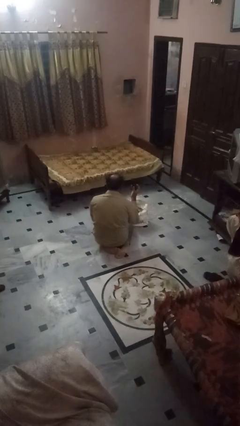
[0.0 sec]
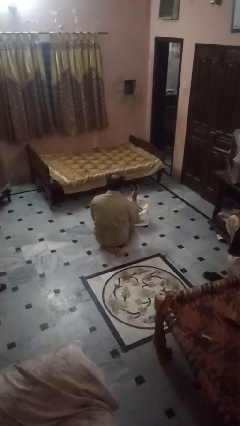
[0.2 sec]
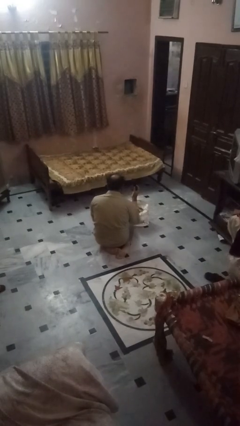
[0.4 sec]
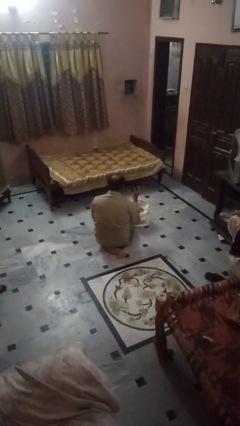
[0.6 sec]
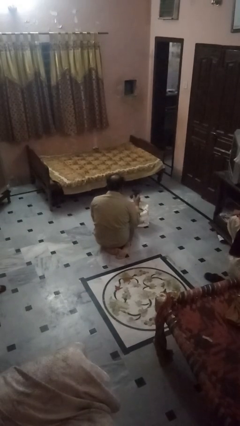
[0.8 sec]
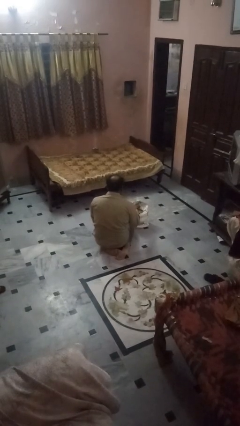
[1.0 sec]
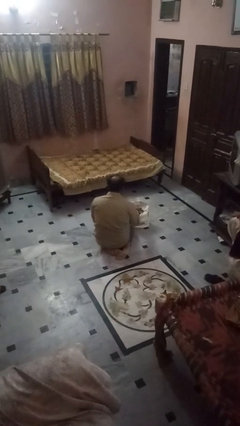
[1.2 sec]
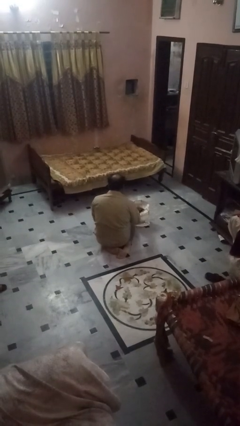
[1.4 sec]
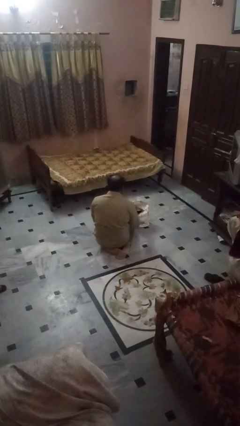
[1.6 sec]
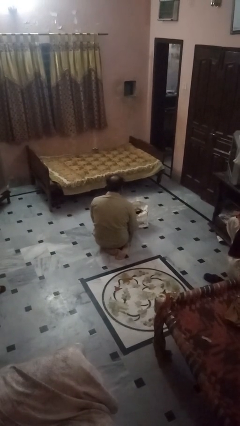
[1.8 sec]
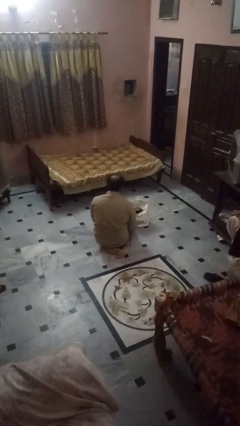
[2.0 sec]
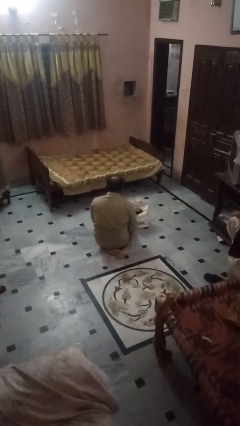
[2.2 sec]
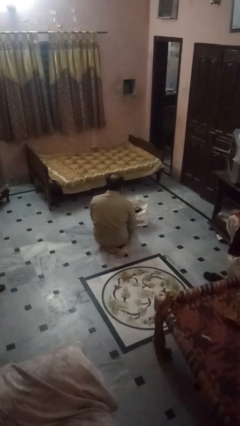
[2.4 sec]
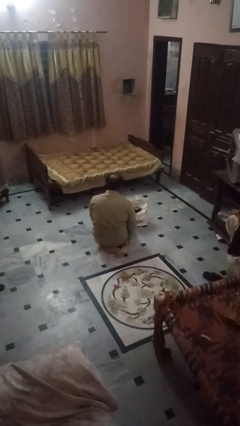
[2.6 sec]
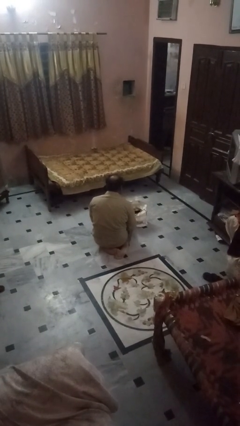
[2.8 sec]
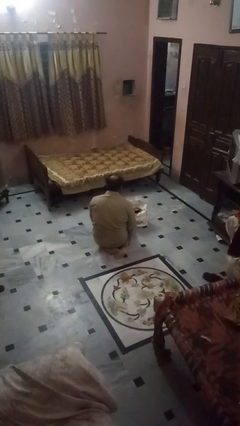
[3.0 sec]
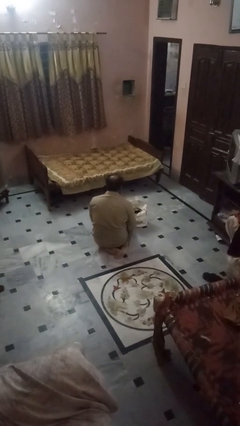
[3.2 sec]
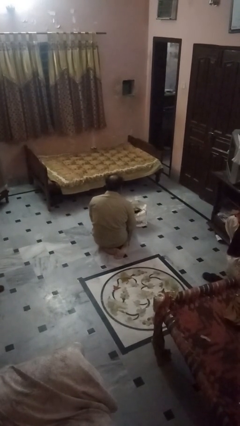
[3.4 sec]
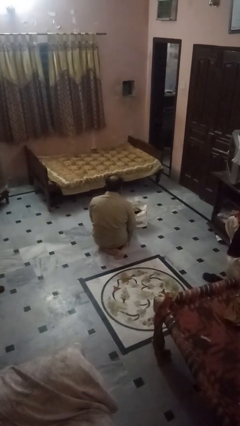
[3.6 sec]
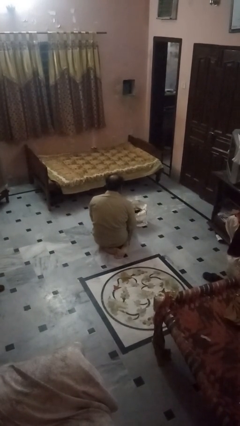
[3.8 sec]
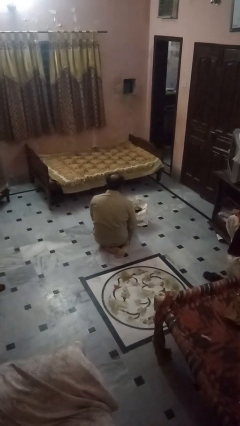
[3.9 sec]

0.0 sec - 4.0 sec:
person puts object into bag

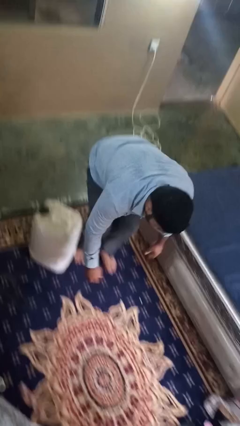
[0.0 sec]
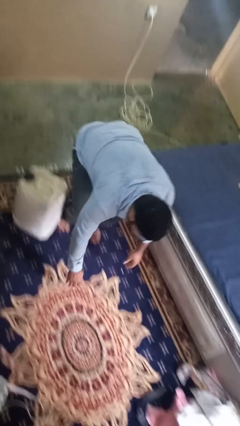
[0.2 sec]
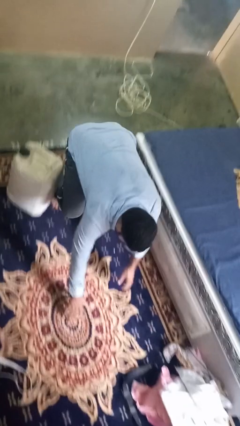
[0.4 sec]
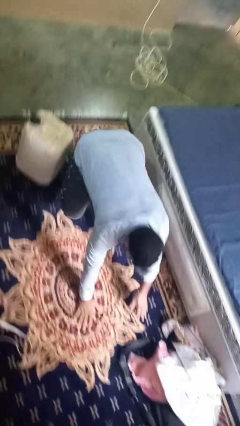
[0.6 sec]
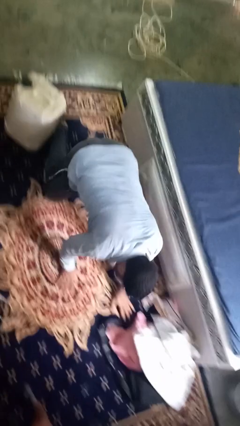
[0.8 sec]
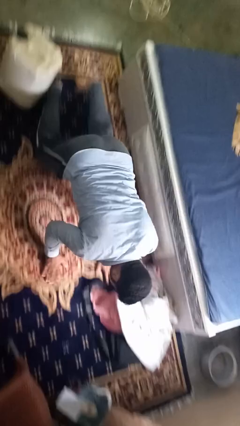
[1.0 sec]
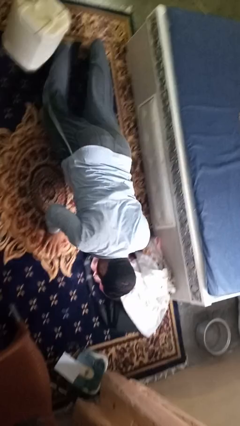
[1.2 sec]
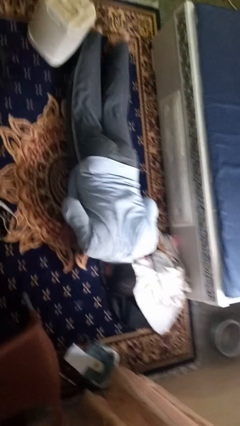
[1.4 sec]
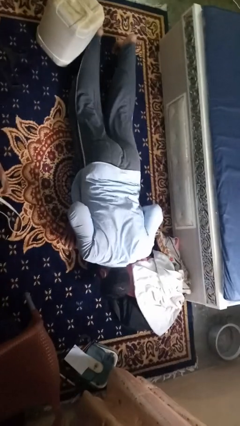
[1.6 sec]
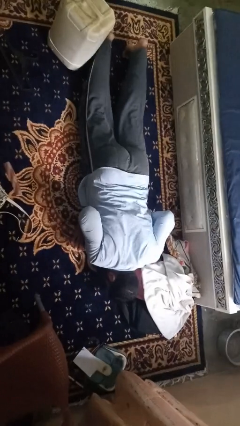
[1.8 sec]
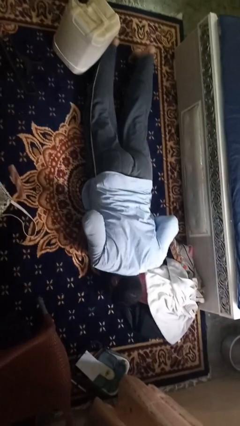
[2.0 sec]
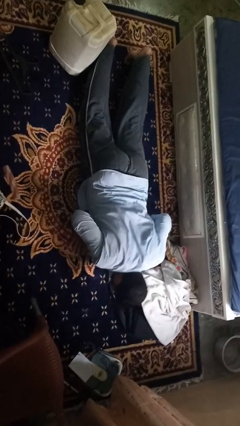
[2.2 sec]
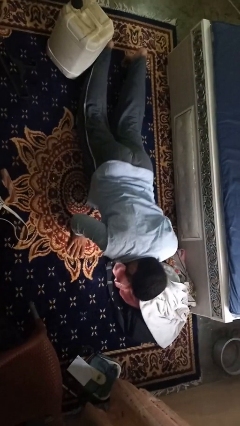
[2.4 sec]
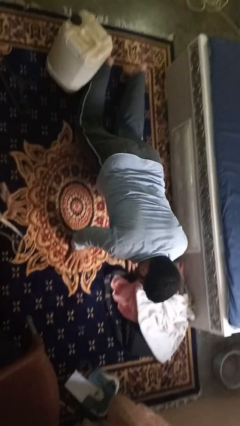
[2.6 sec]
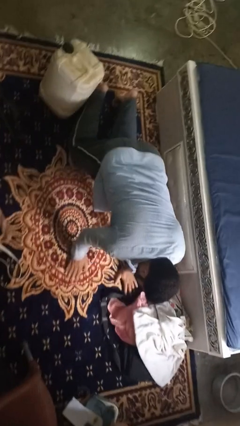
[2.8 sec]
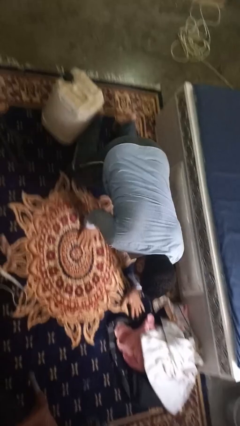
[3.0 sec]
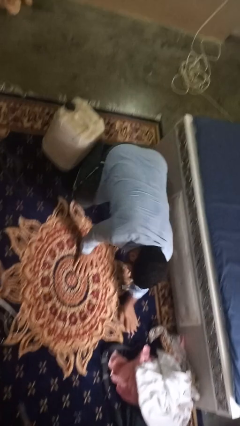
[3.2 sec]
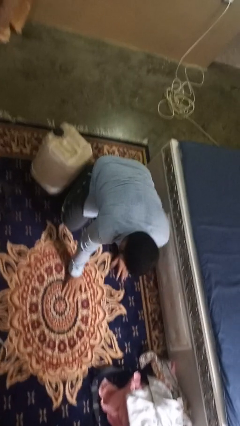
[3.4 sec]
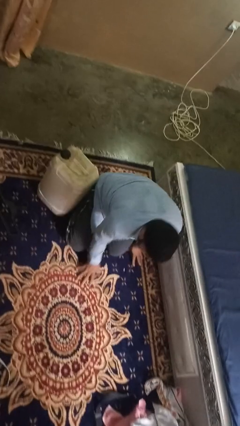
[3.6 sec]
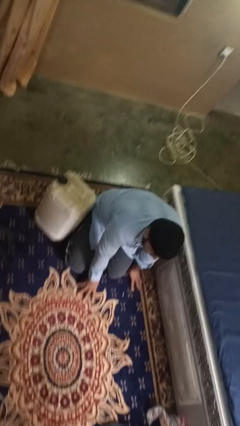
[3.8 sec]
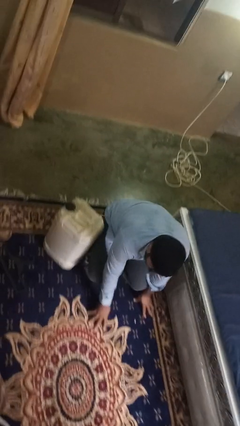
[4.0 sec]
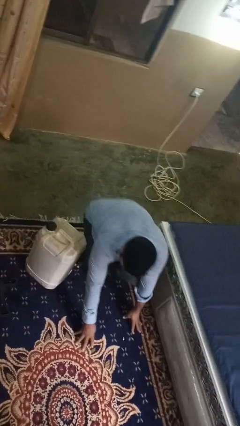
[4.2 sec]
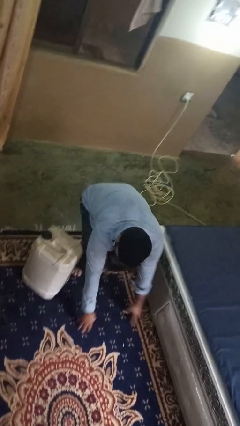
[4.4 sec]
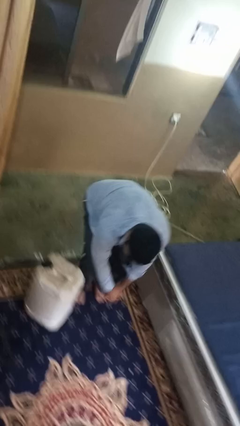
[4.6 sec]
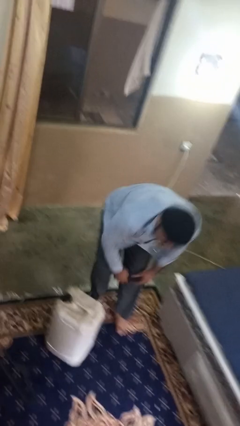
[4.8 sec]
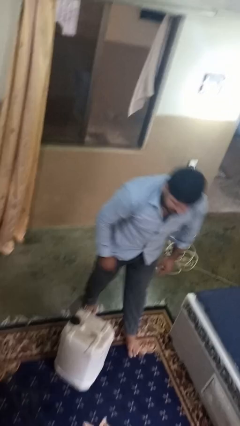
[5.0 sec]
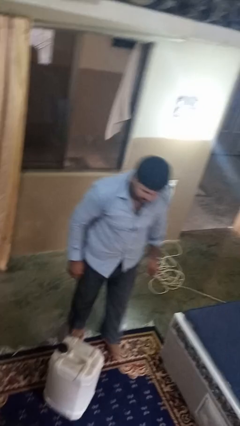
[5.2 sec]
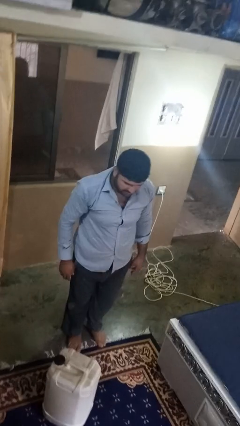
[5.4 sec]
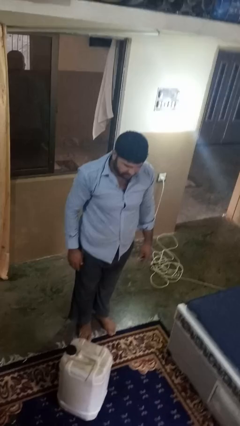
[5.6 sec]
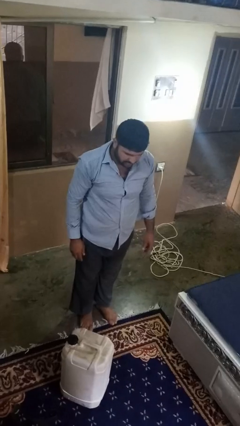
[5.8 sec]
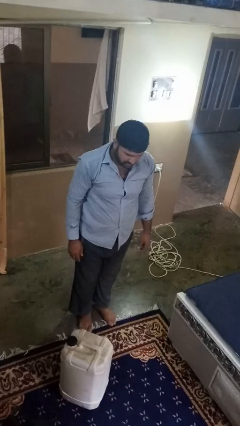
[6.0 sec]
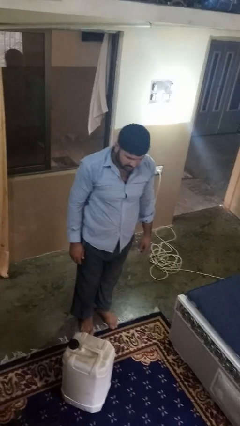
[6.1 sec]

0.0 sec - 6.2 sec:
person lies down on floor

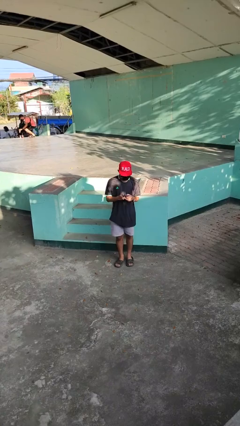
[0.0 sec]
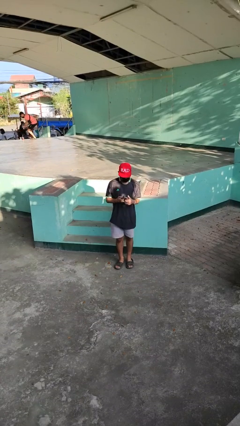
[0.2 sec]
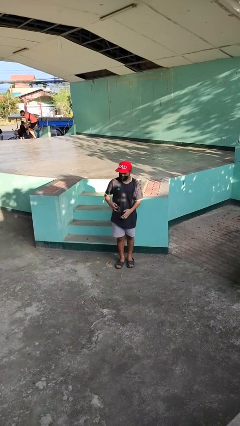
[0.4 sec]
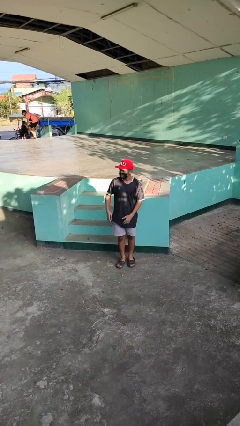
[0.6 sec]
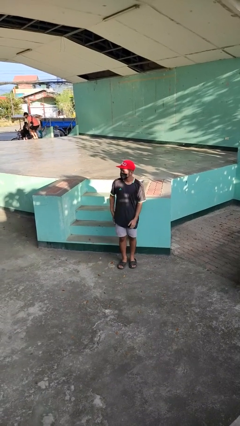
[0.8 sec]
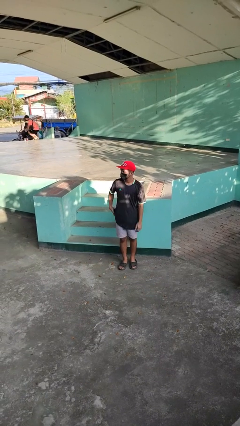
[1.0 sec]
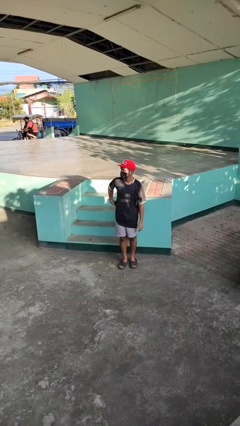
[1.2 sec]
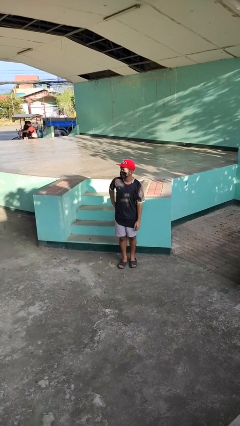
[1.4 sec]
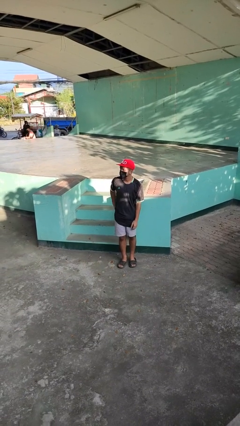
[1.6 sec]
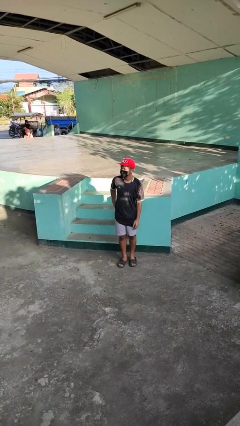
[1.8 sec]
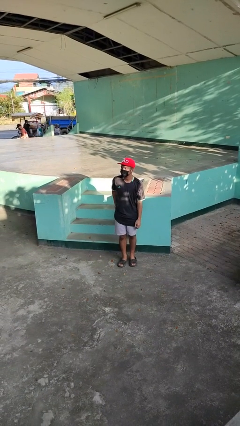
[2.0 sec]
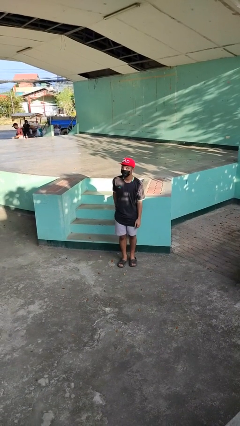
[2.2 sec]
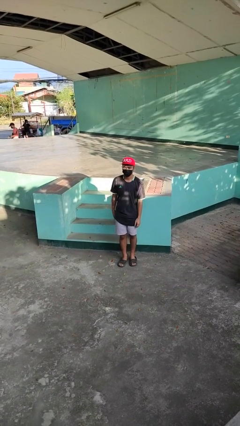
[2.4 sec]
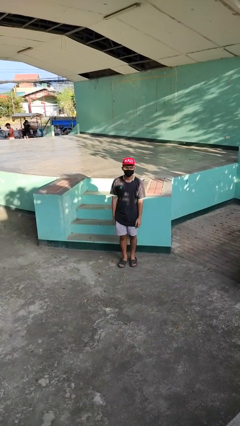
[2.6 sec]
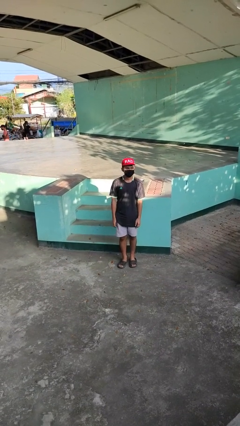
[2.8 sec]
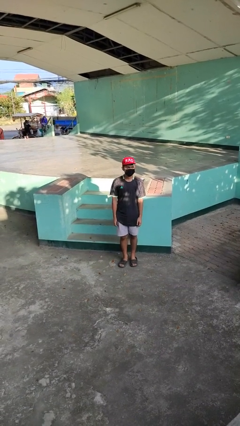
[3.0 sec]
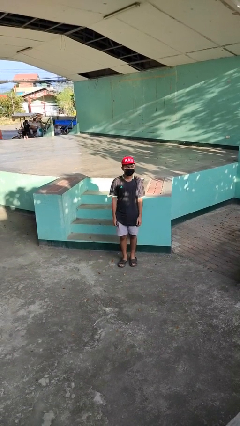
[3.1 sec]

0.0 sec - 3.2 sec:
person puts phone into pocket

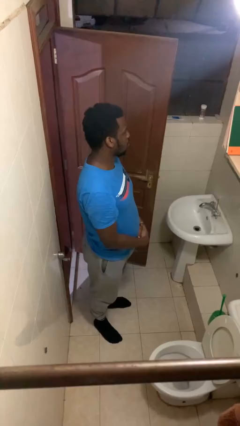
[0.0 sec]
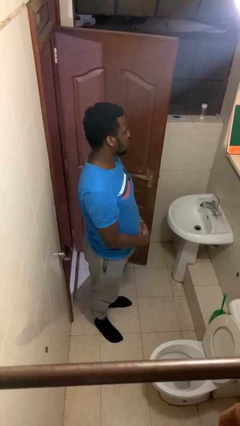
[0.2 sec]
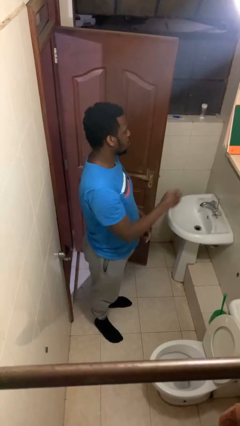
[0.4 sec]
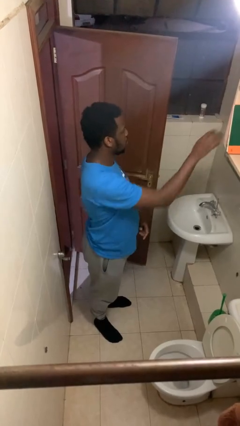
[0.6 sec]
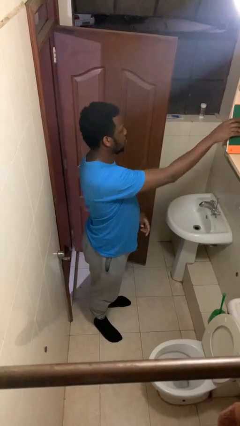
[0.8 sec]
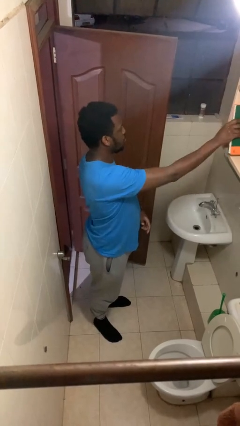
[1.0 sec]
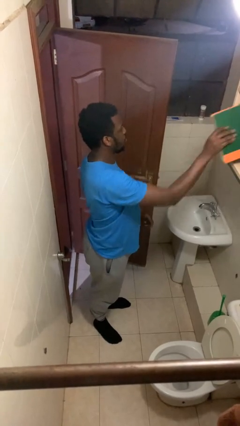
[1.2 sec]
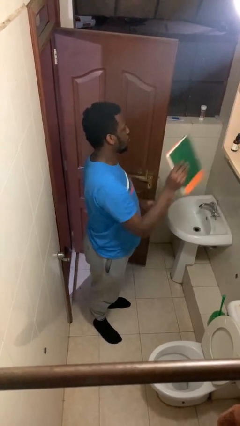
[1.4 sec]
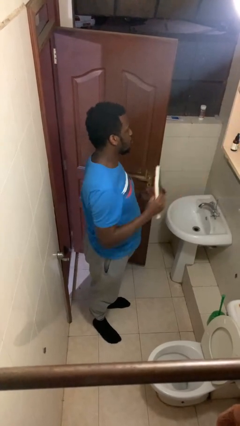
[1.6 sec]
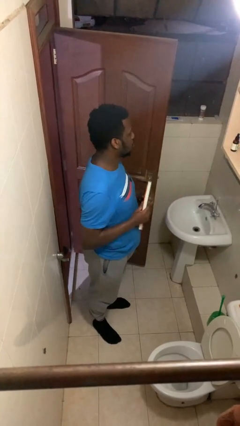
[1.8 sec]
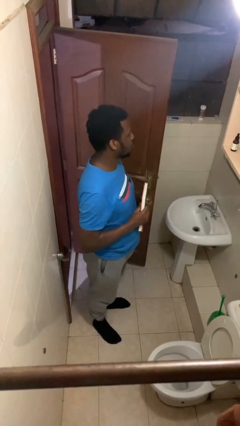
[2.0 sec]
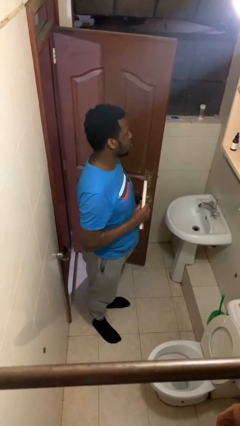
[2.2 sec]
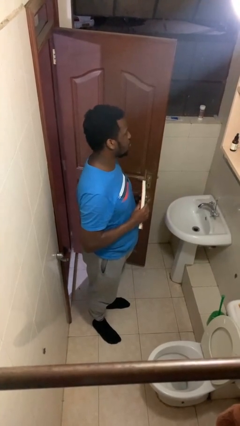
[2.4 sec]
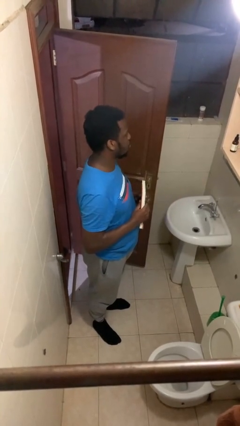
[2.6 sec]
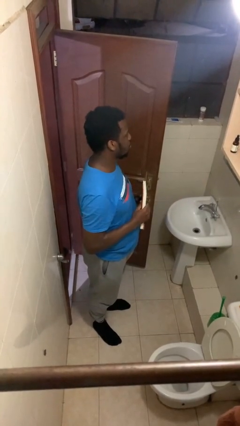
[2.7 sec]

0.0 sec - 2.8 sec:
person picks up object from cabinet

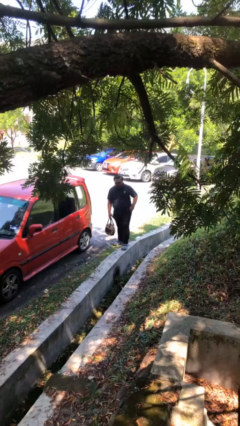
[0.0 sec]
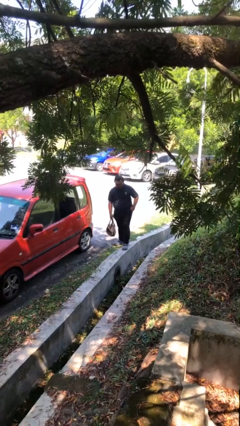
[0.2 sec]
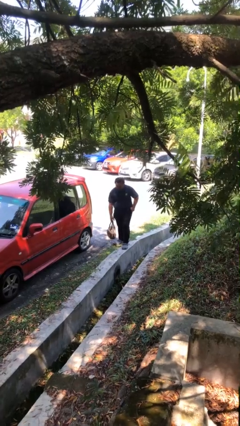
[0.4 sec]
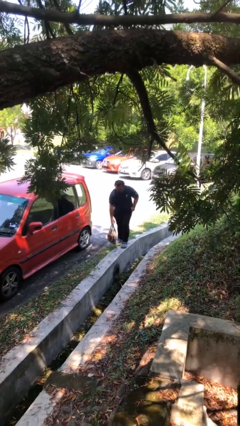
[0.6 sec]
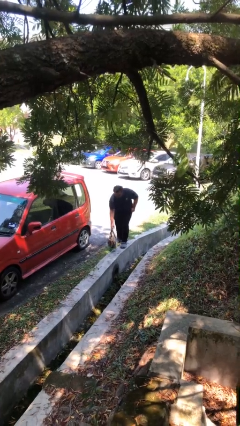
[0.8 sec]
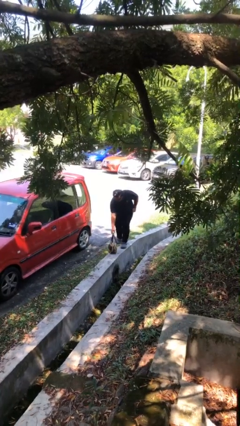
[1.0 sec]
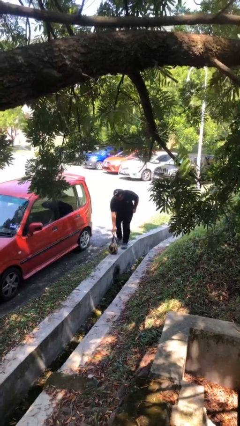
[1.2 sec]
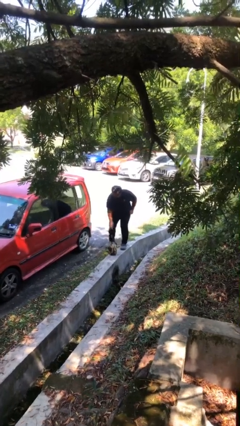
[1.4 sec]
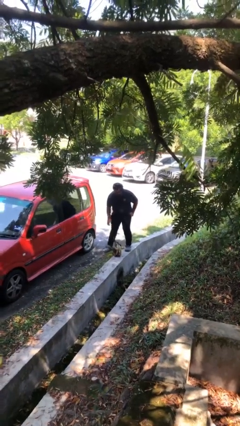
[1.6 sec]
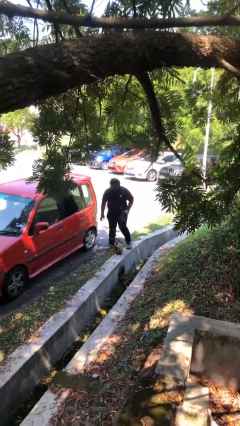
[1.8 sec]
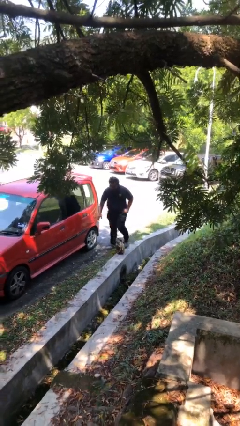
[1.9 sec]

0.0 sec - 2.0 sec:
person puts down object on floor
